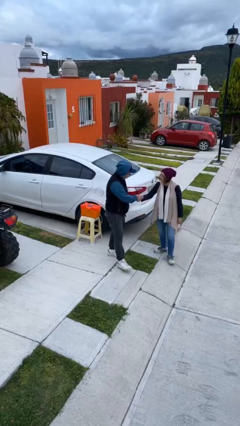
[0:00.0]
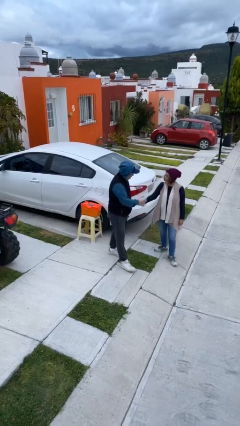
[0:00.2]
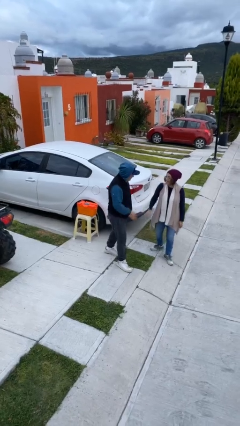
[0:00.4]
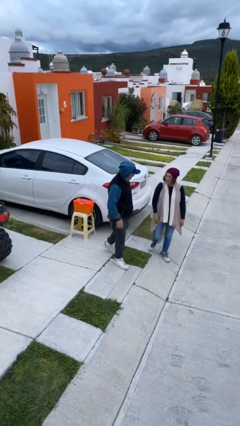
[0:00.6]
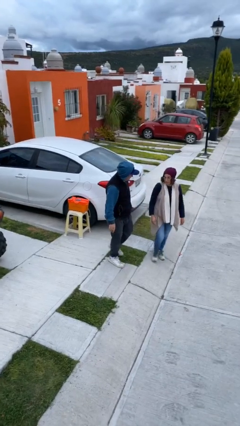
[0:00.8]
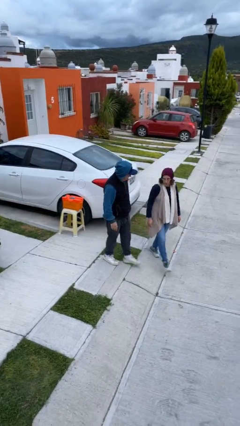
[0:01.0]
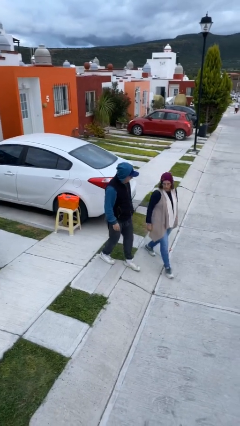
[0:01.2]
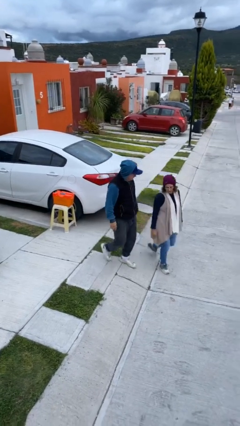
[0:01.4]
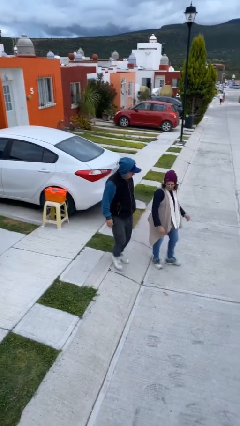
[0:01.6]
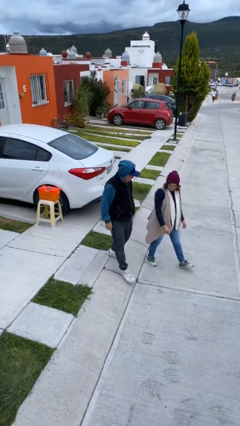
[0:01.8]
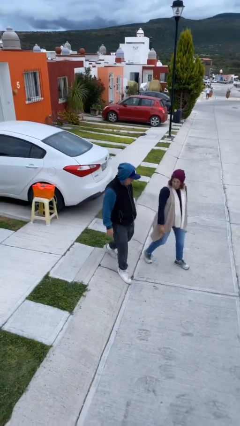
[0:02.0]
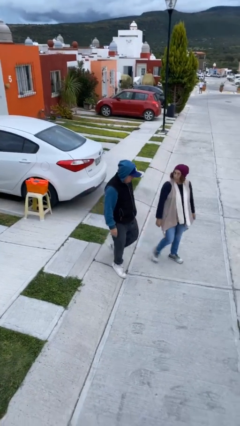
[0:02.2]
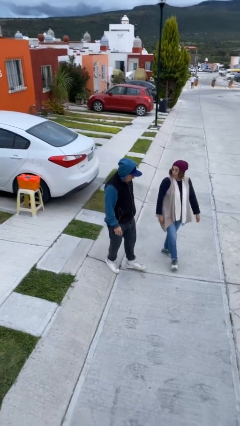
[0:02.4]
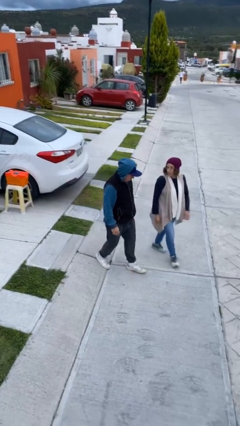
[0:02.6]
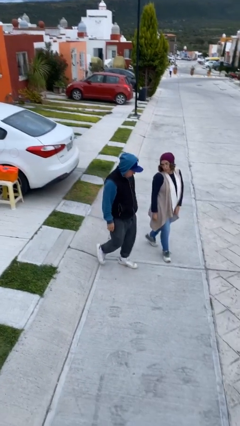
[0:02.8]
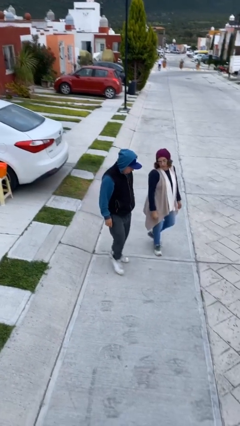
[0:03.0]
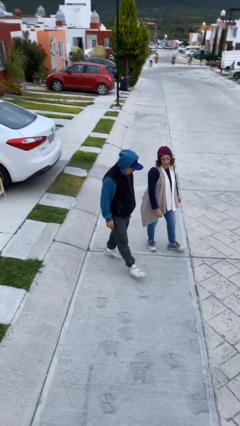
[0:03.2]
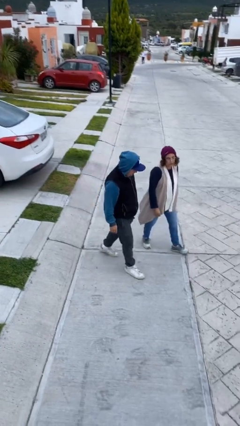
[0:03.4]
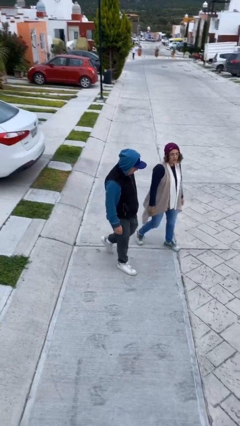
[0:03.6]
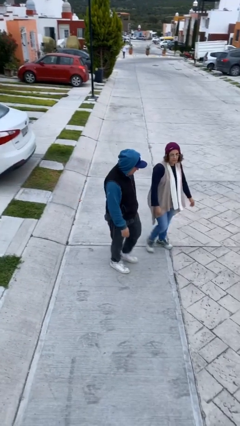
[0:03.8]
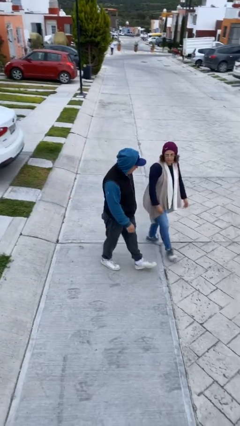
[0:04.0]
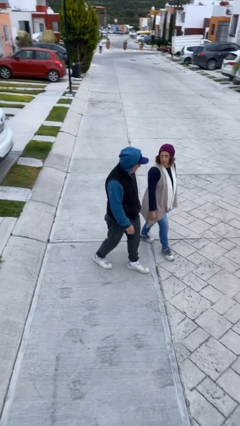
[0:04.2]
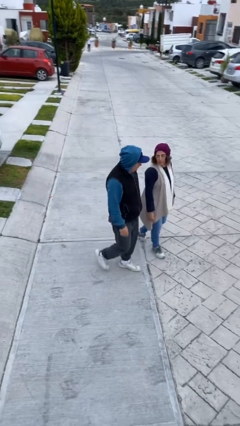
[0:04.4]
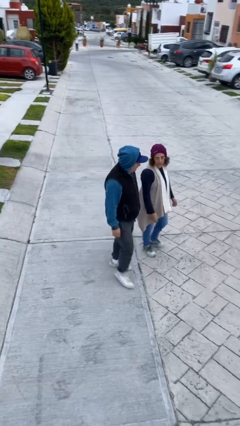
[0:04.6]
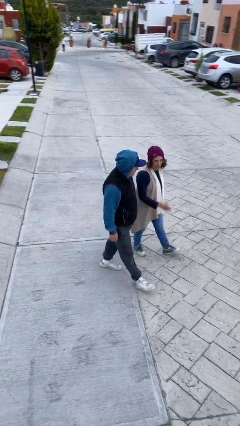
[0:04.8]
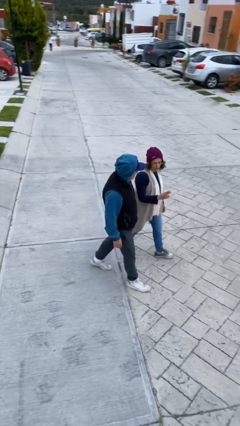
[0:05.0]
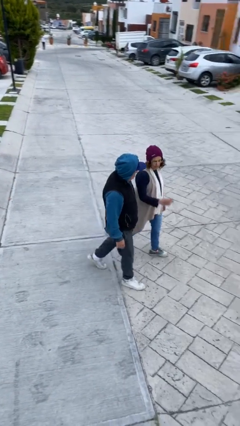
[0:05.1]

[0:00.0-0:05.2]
person talks to person

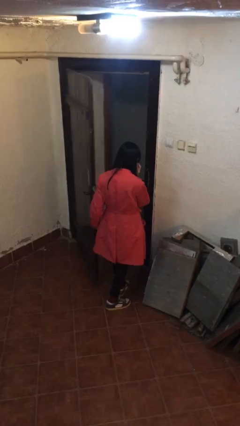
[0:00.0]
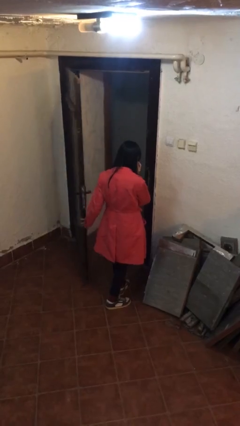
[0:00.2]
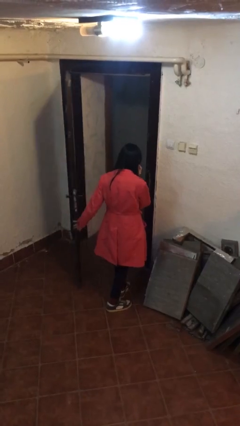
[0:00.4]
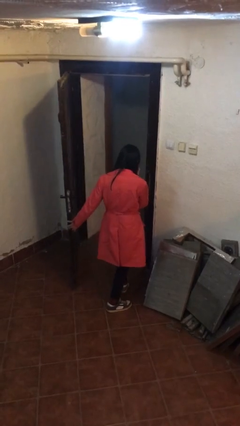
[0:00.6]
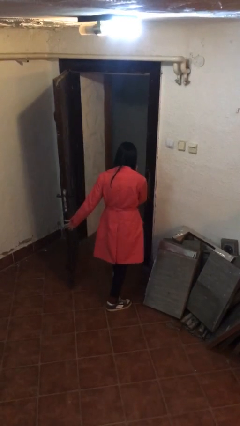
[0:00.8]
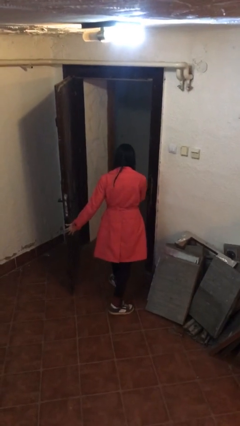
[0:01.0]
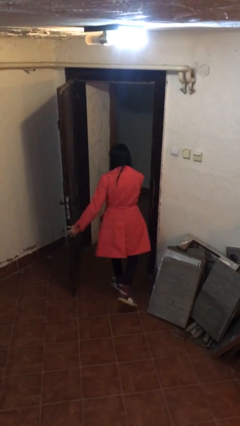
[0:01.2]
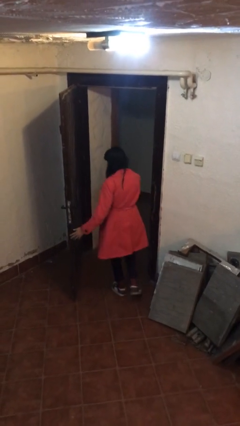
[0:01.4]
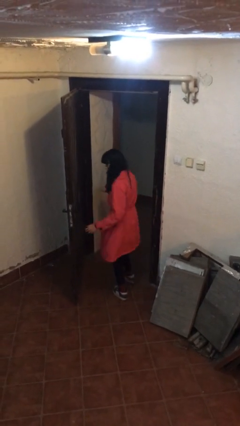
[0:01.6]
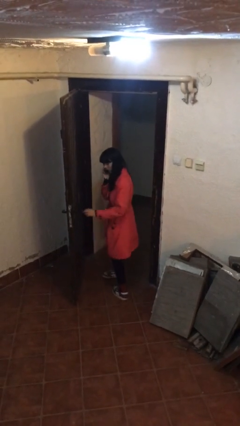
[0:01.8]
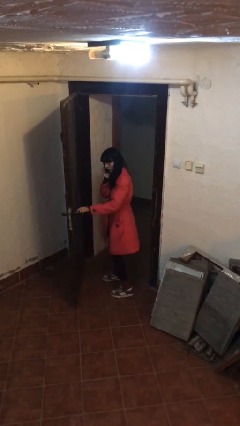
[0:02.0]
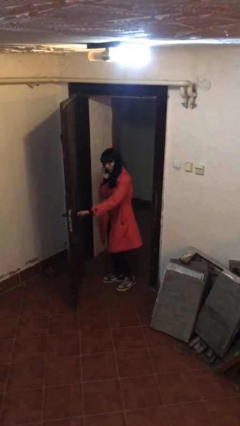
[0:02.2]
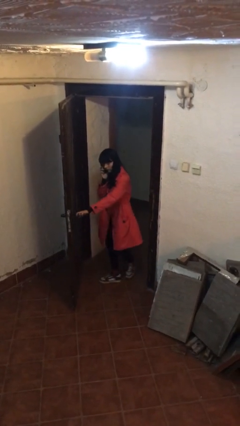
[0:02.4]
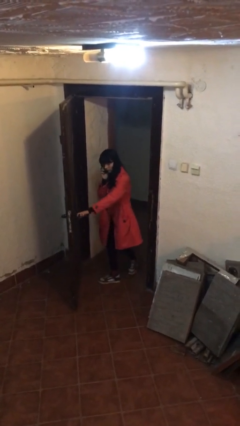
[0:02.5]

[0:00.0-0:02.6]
person exits scene through structure

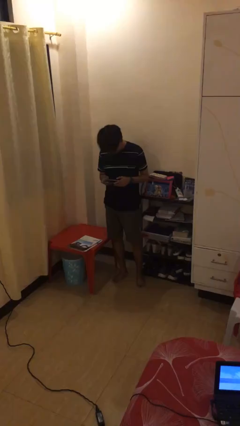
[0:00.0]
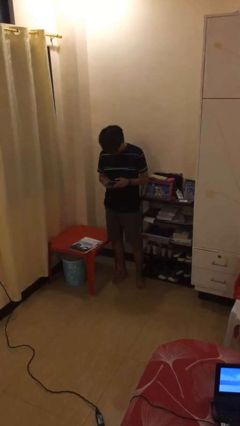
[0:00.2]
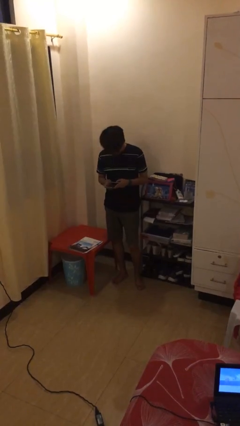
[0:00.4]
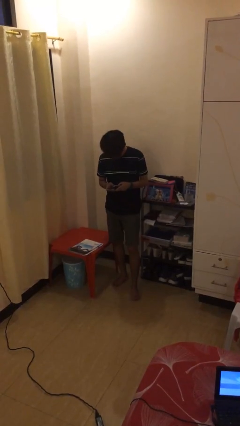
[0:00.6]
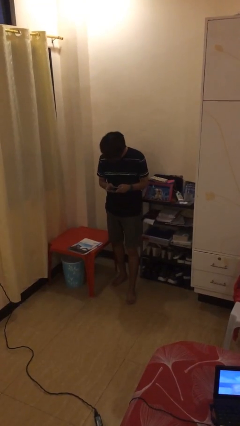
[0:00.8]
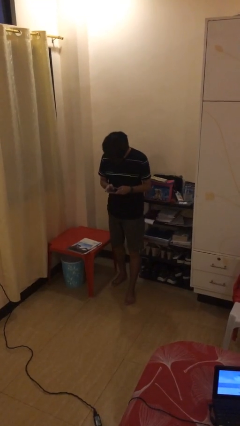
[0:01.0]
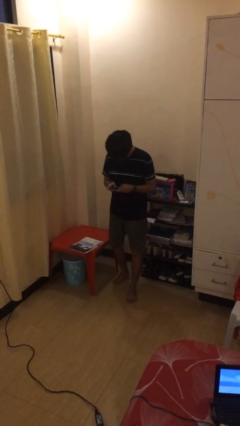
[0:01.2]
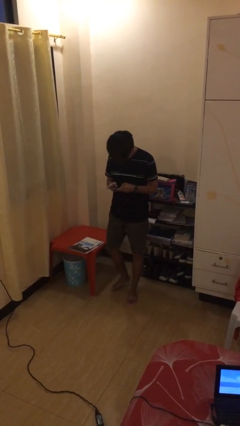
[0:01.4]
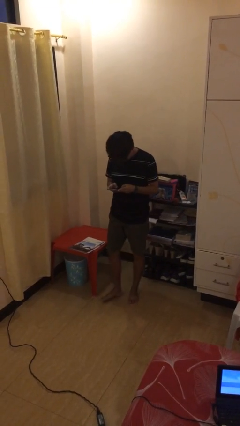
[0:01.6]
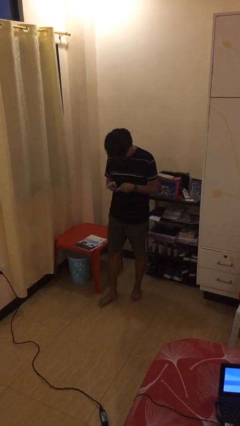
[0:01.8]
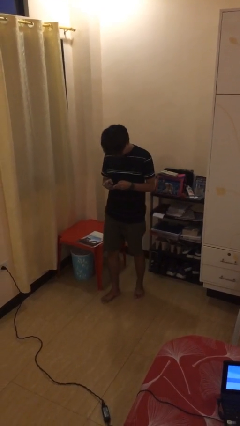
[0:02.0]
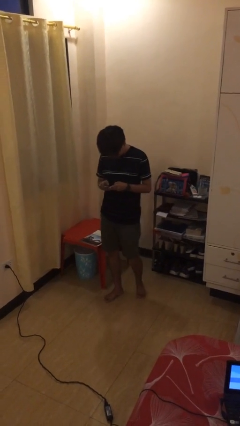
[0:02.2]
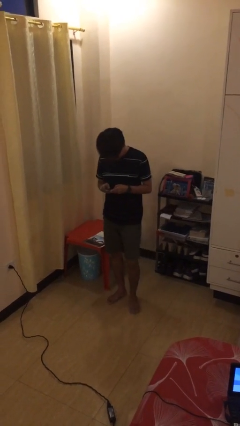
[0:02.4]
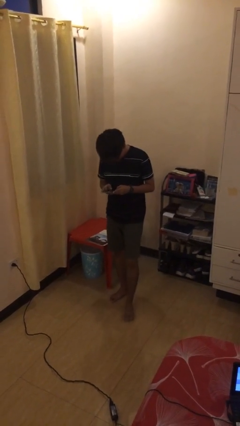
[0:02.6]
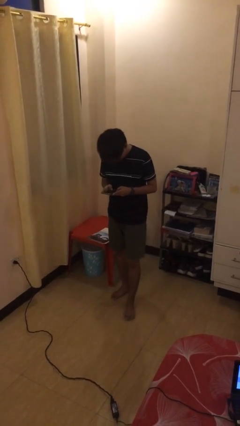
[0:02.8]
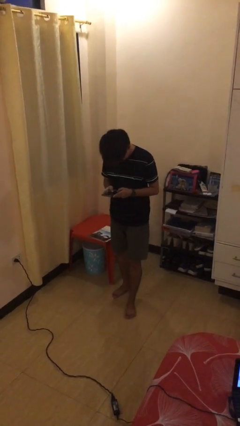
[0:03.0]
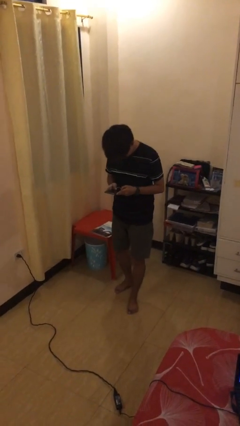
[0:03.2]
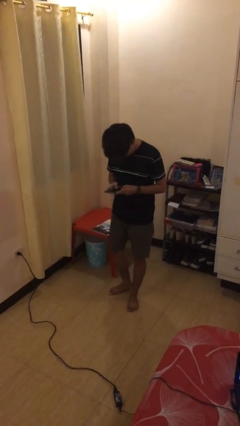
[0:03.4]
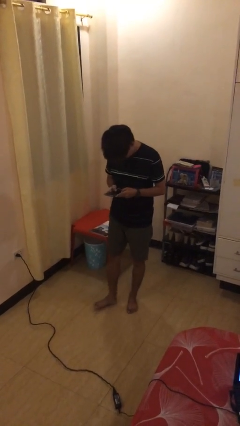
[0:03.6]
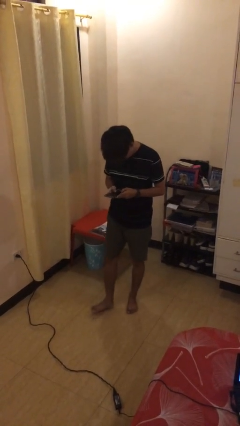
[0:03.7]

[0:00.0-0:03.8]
person texts on phone

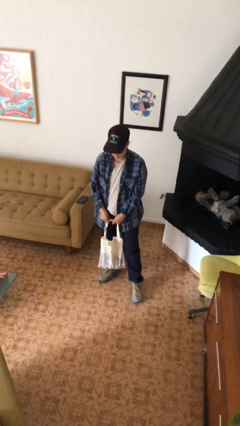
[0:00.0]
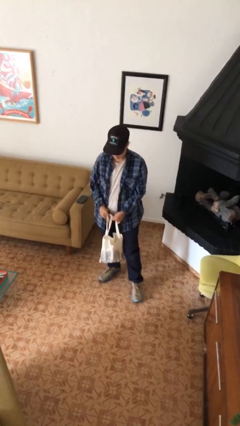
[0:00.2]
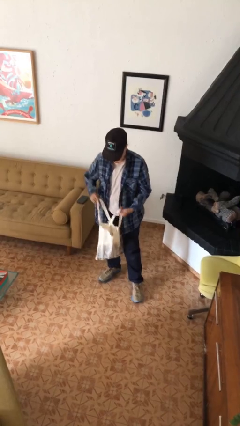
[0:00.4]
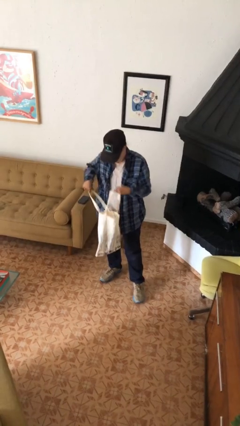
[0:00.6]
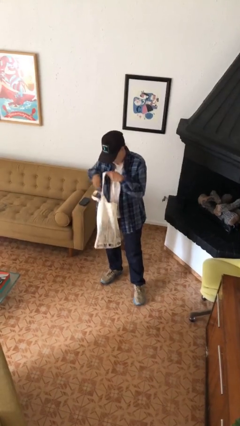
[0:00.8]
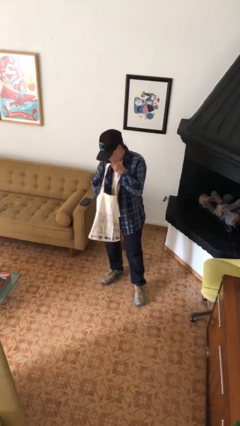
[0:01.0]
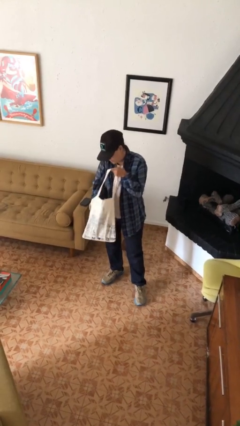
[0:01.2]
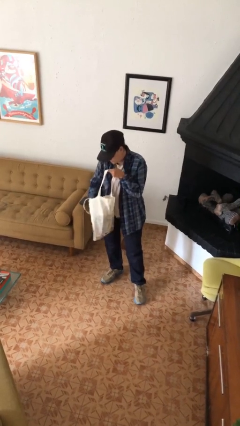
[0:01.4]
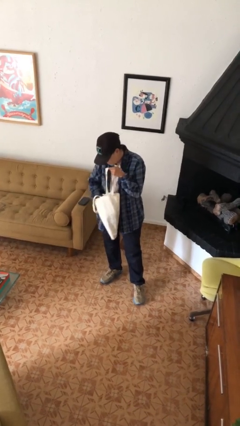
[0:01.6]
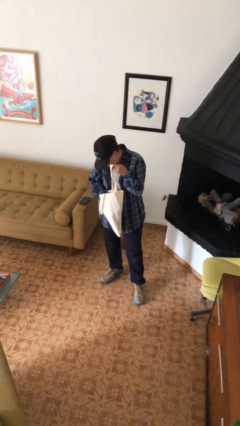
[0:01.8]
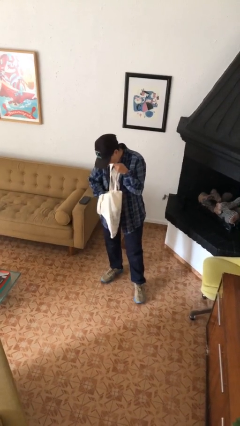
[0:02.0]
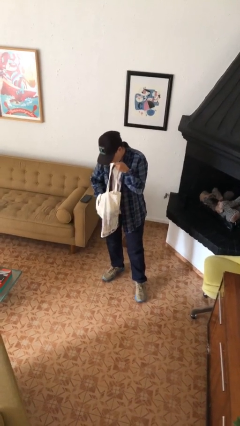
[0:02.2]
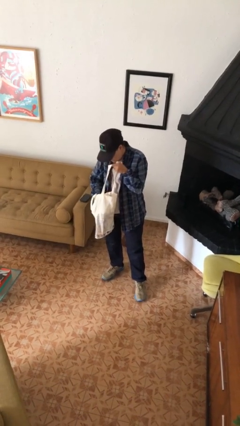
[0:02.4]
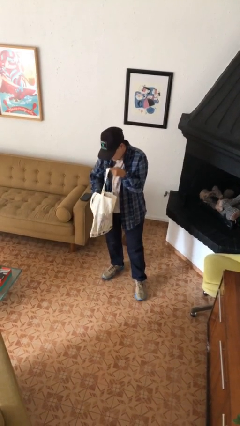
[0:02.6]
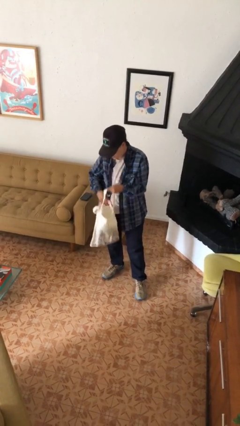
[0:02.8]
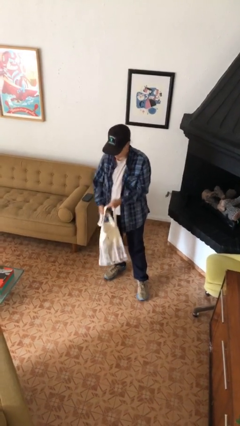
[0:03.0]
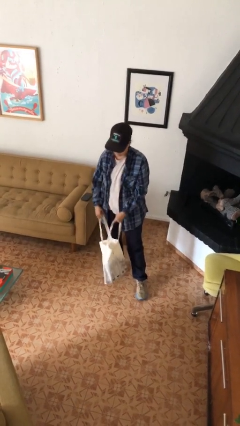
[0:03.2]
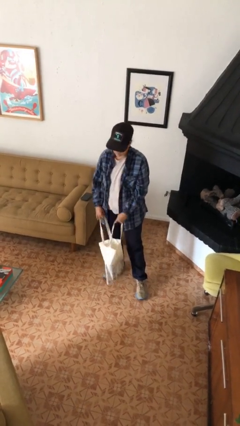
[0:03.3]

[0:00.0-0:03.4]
person searches in bag

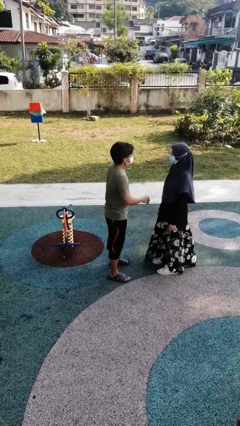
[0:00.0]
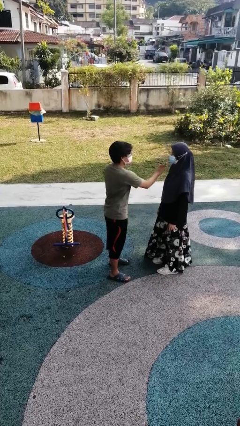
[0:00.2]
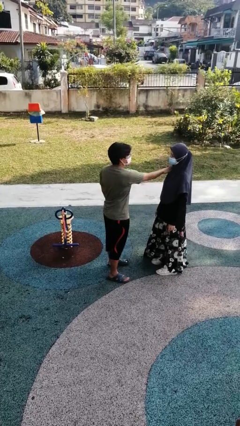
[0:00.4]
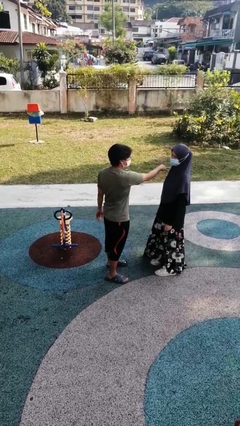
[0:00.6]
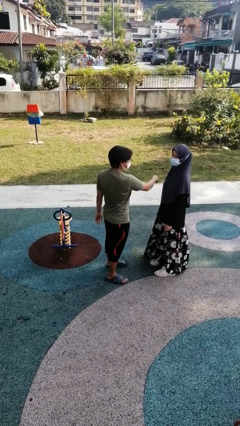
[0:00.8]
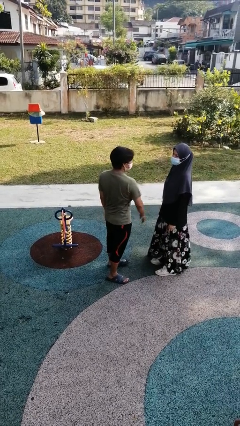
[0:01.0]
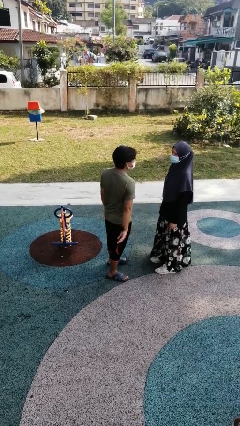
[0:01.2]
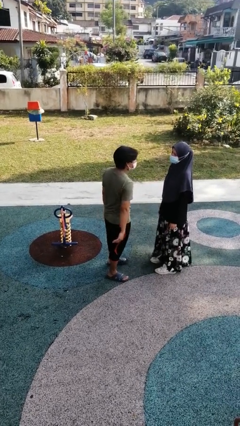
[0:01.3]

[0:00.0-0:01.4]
person shoves person

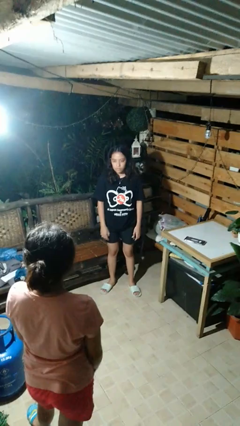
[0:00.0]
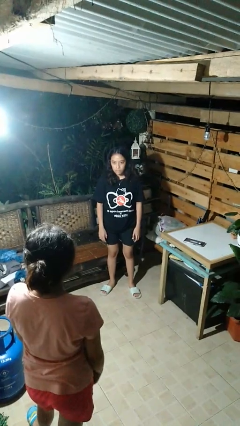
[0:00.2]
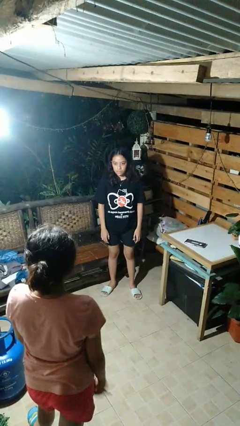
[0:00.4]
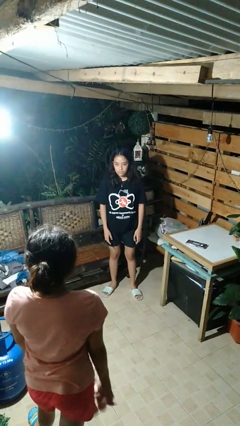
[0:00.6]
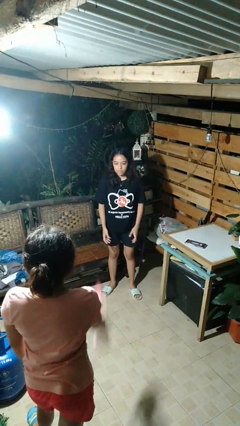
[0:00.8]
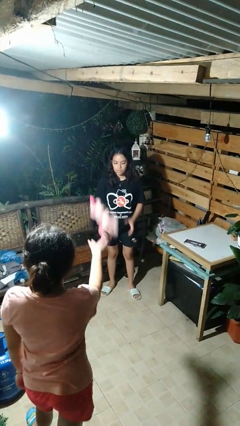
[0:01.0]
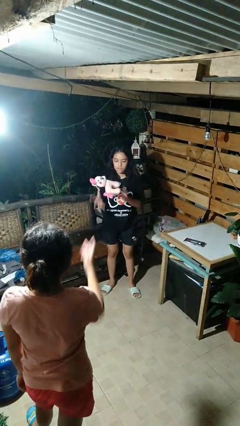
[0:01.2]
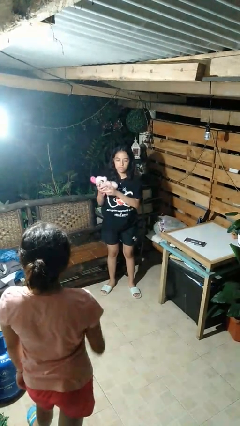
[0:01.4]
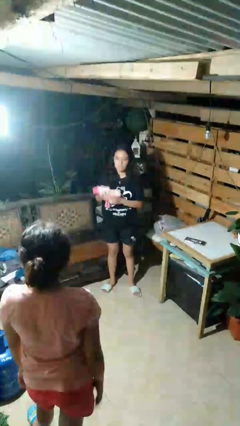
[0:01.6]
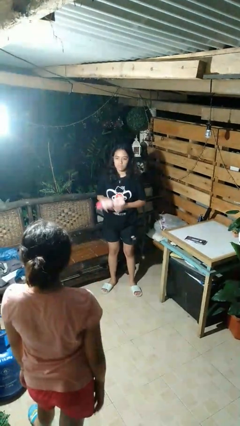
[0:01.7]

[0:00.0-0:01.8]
person catches object from person
